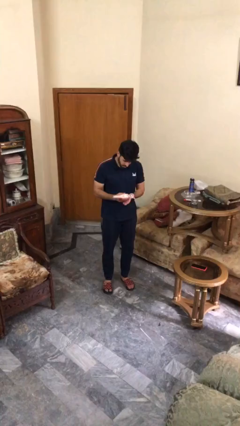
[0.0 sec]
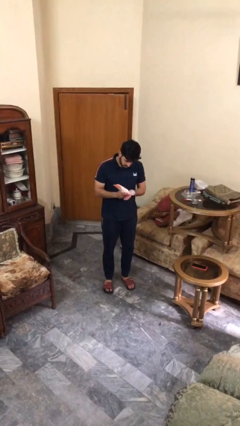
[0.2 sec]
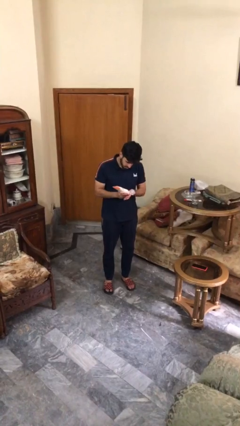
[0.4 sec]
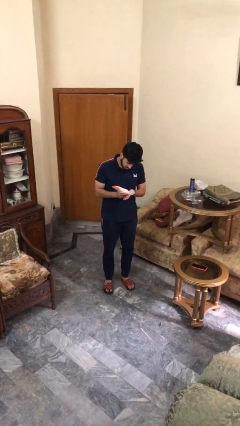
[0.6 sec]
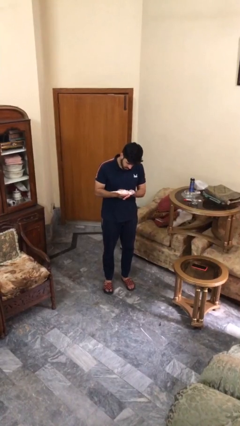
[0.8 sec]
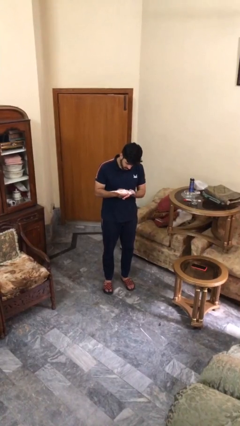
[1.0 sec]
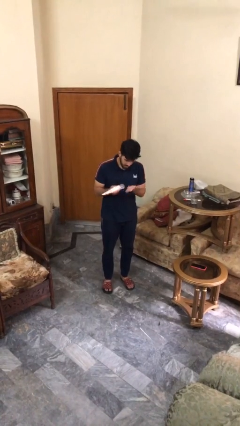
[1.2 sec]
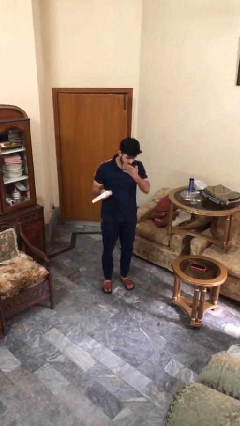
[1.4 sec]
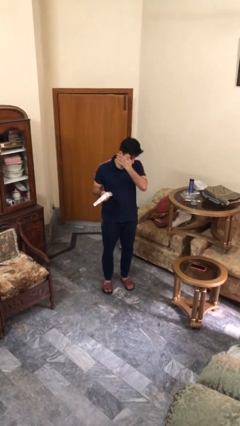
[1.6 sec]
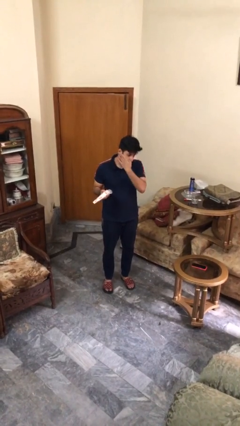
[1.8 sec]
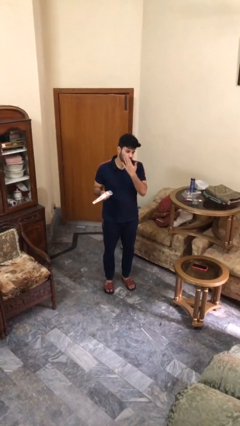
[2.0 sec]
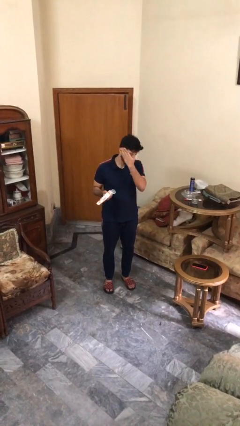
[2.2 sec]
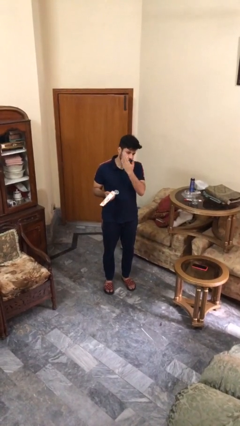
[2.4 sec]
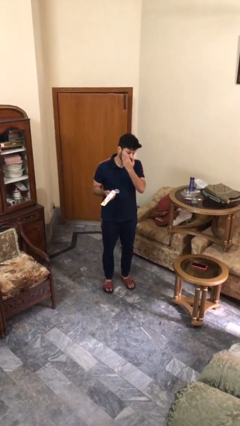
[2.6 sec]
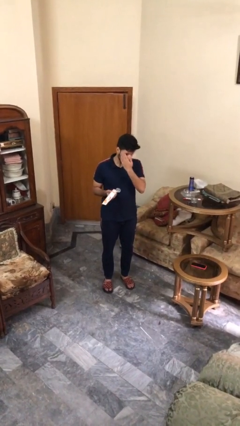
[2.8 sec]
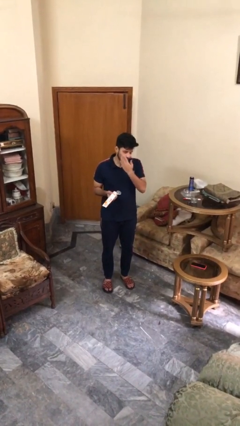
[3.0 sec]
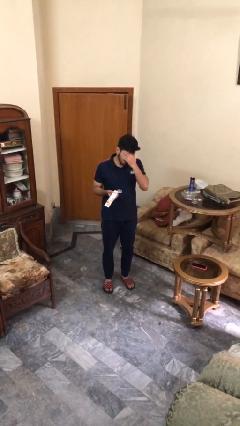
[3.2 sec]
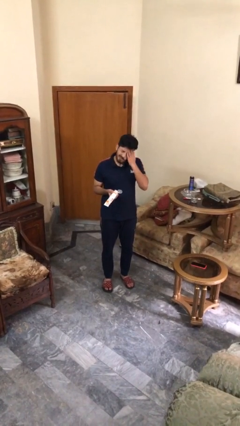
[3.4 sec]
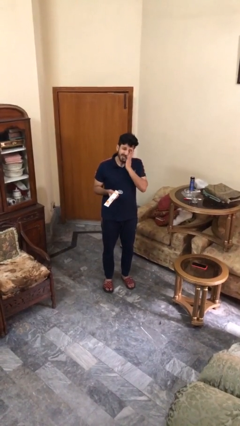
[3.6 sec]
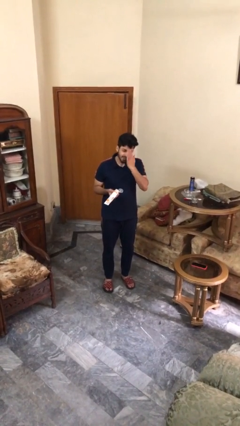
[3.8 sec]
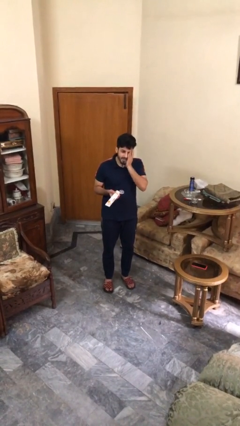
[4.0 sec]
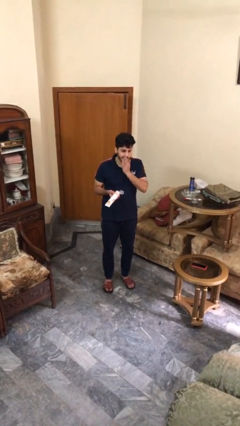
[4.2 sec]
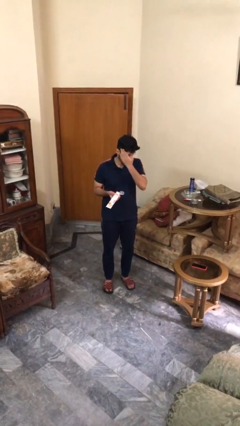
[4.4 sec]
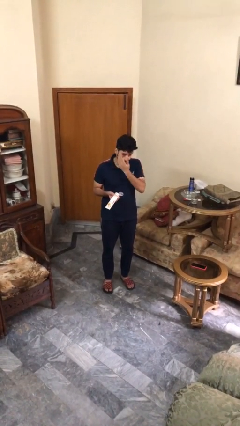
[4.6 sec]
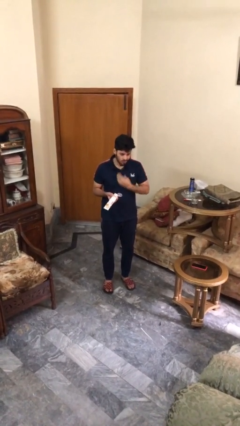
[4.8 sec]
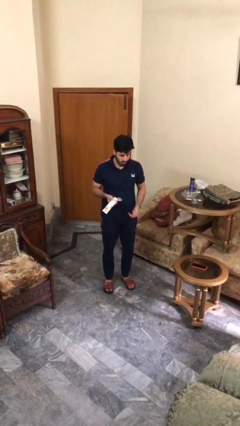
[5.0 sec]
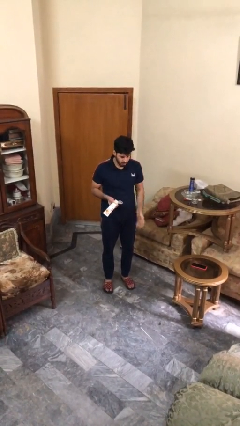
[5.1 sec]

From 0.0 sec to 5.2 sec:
person applies sunscreen

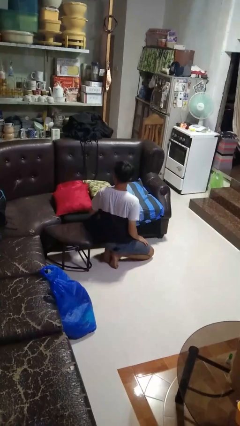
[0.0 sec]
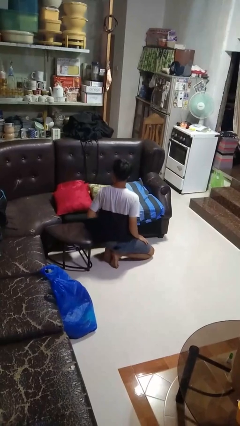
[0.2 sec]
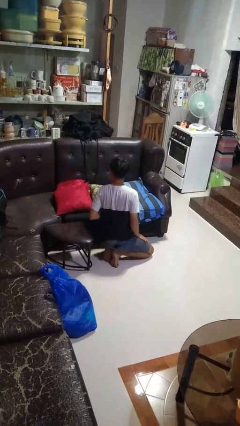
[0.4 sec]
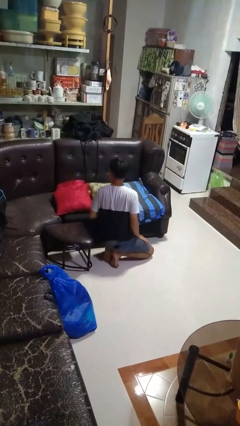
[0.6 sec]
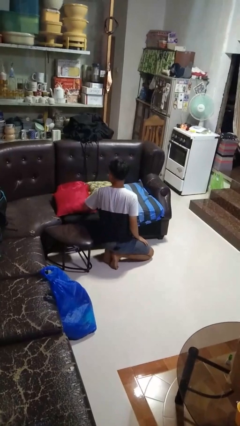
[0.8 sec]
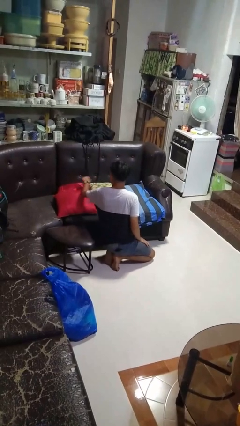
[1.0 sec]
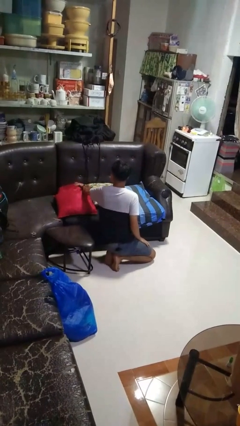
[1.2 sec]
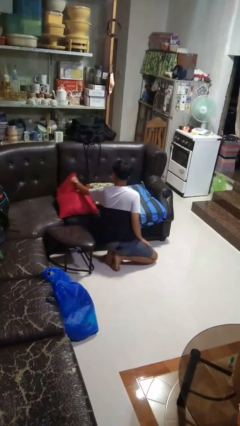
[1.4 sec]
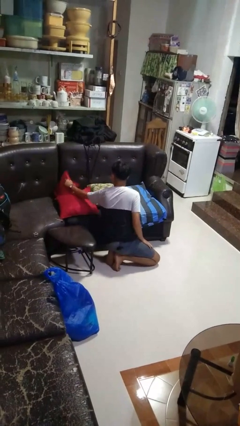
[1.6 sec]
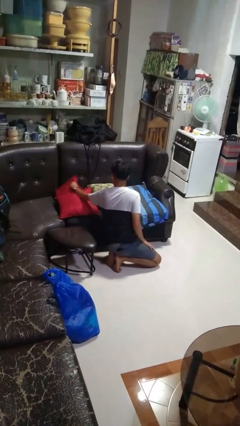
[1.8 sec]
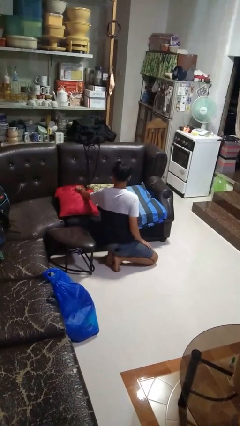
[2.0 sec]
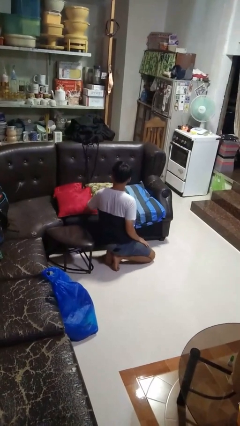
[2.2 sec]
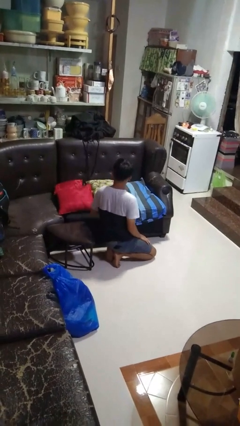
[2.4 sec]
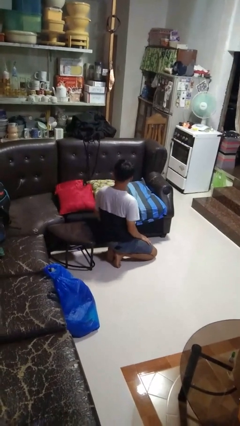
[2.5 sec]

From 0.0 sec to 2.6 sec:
person searches in couch

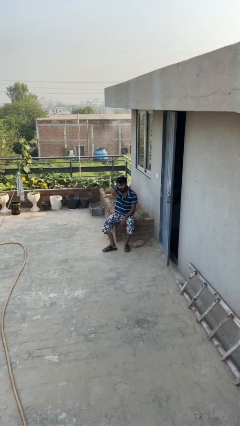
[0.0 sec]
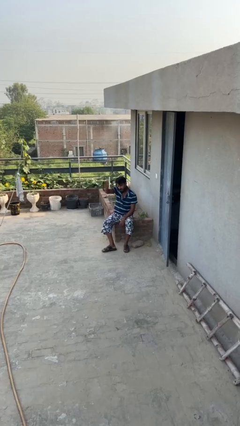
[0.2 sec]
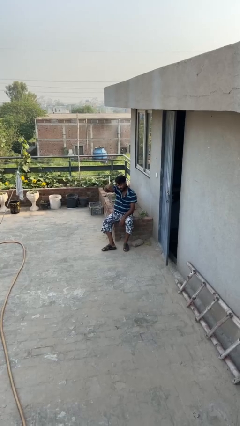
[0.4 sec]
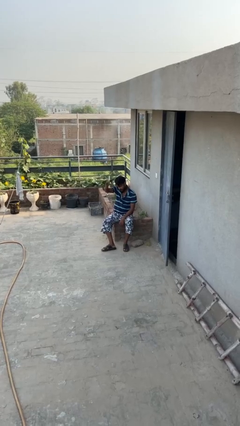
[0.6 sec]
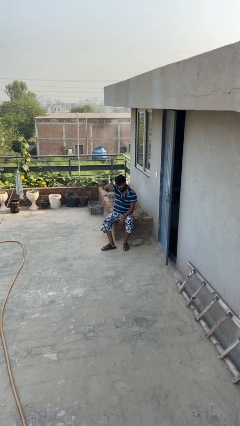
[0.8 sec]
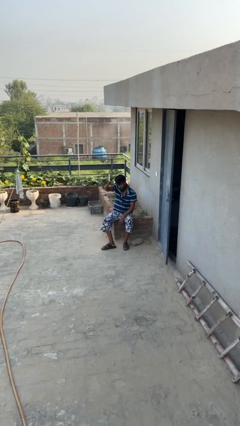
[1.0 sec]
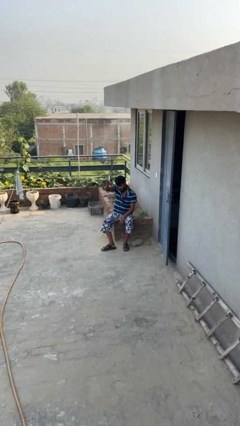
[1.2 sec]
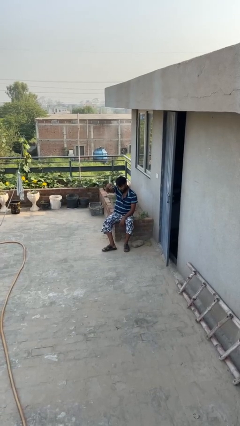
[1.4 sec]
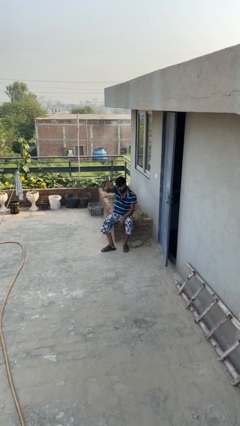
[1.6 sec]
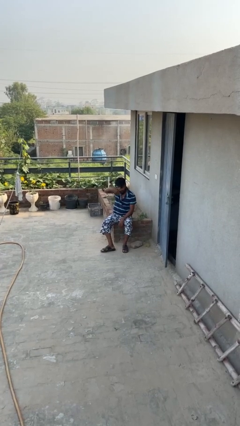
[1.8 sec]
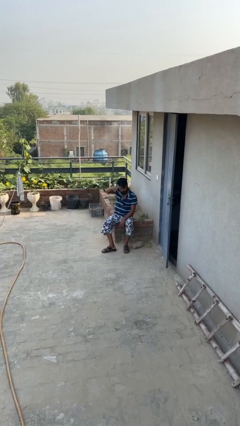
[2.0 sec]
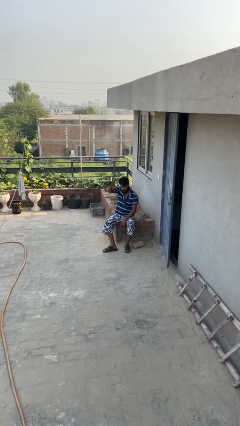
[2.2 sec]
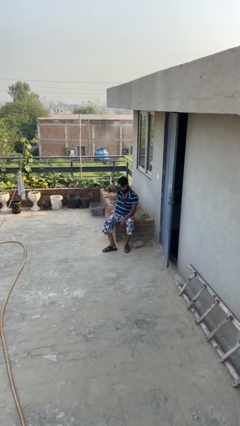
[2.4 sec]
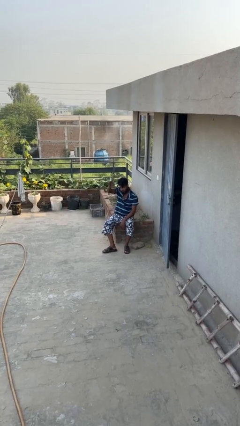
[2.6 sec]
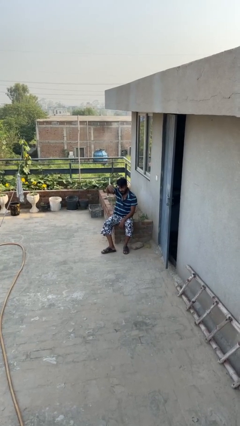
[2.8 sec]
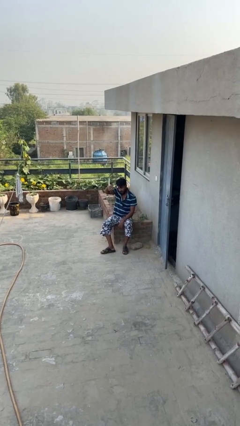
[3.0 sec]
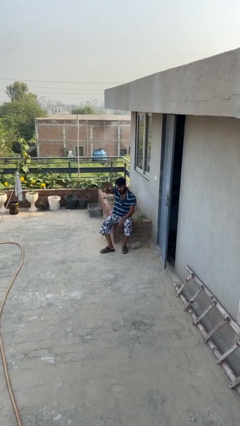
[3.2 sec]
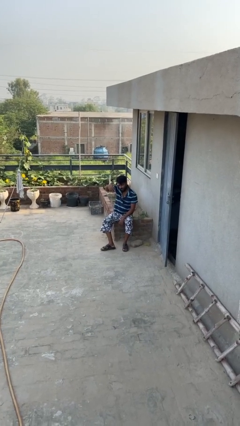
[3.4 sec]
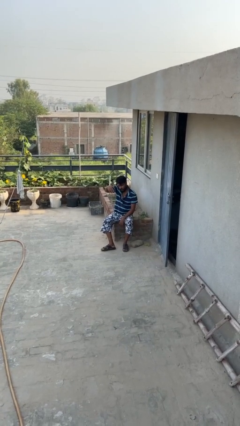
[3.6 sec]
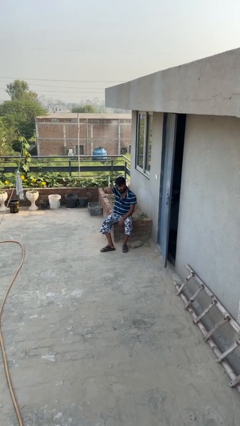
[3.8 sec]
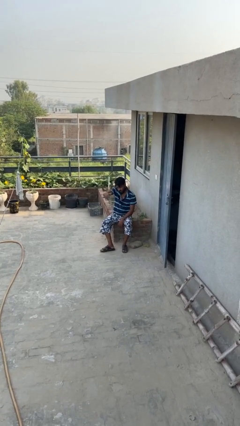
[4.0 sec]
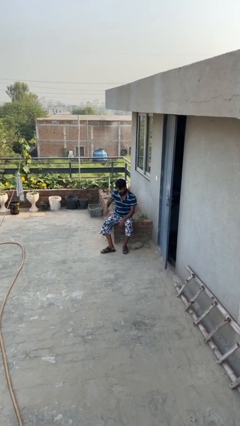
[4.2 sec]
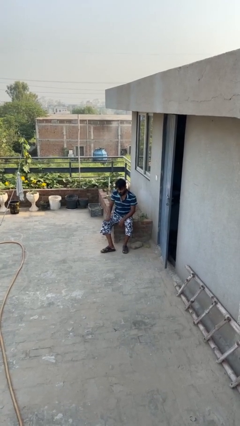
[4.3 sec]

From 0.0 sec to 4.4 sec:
person gestures come here

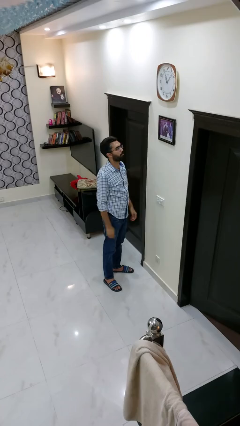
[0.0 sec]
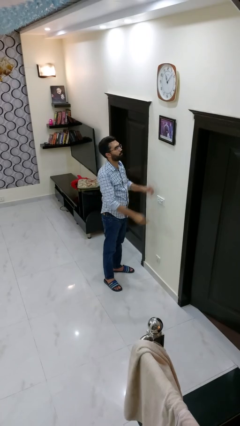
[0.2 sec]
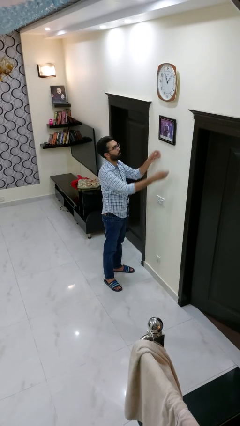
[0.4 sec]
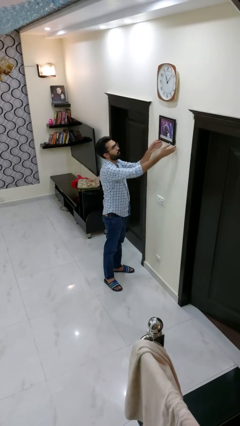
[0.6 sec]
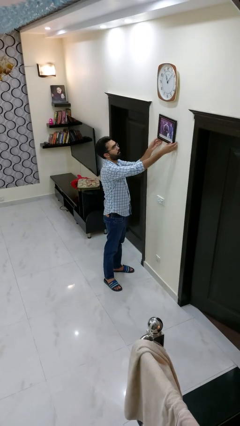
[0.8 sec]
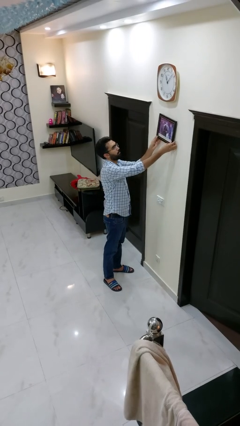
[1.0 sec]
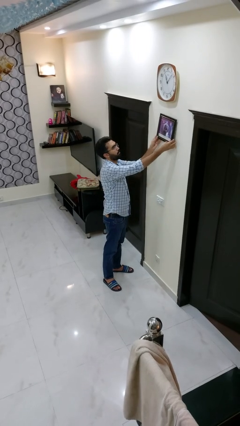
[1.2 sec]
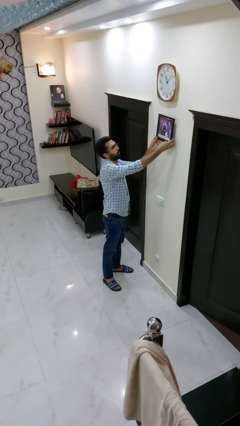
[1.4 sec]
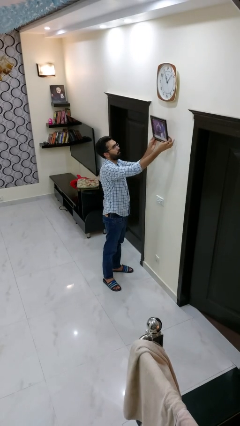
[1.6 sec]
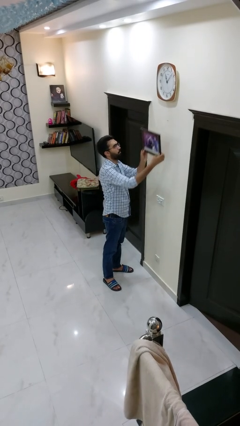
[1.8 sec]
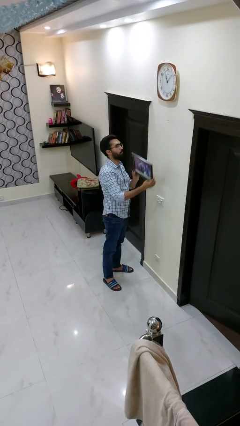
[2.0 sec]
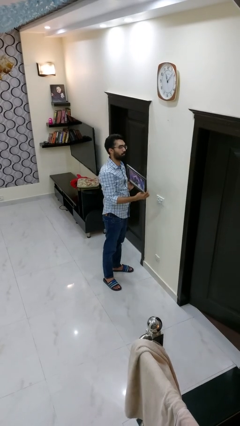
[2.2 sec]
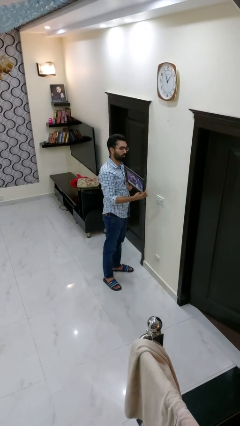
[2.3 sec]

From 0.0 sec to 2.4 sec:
person takes down picture frame

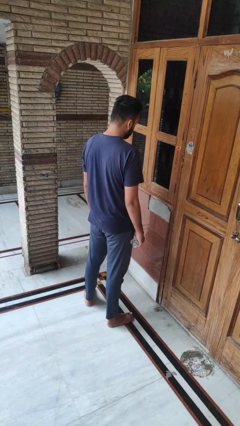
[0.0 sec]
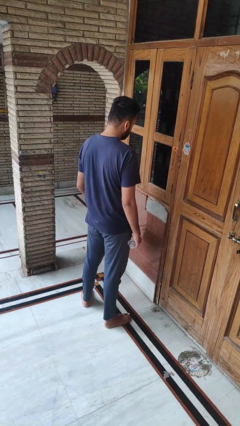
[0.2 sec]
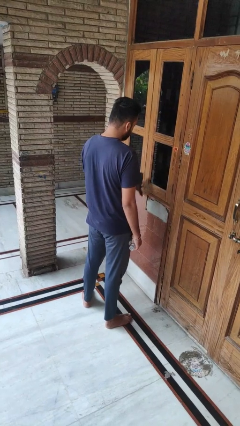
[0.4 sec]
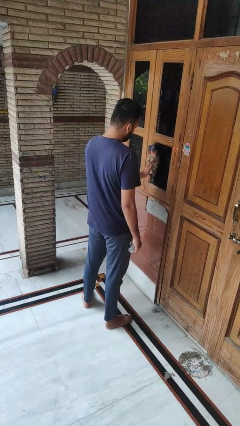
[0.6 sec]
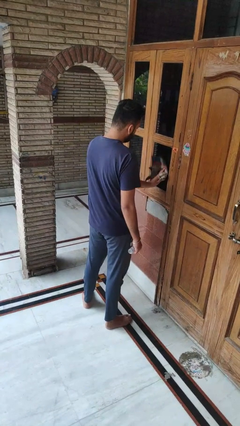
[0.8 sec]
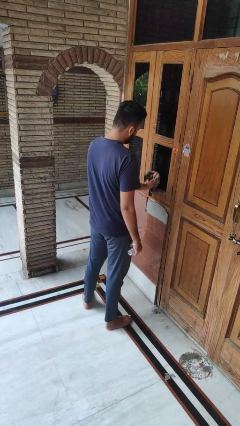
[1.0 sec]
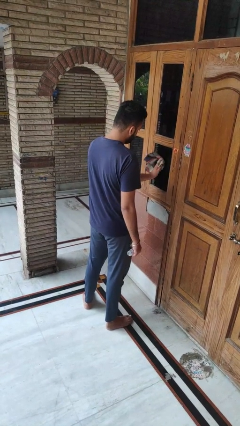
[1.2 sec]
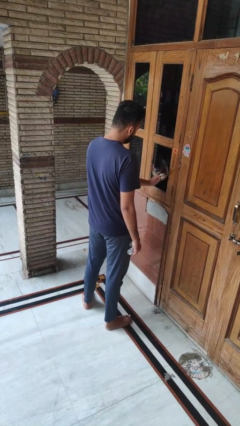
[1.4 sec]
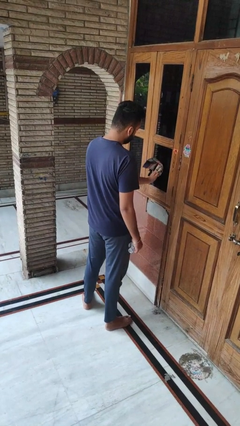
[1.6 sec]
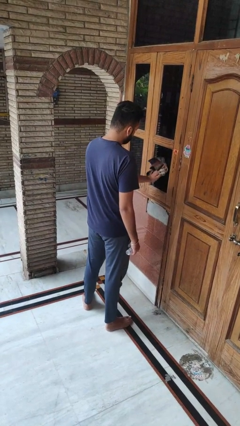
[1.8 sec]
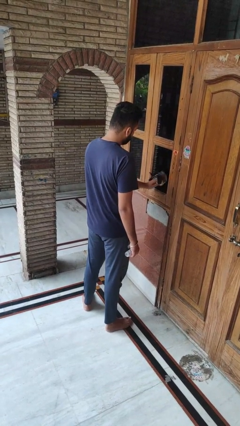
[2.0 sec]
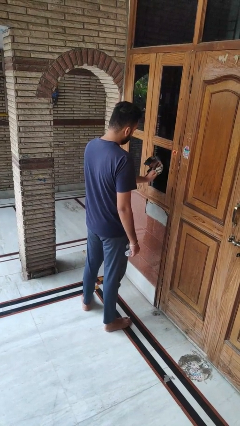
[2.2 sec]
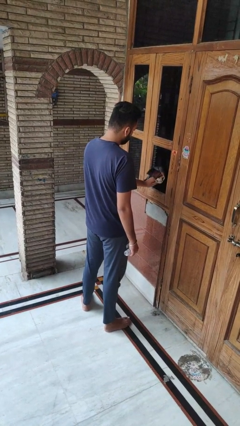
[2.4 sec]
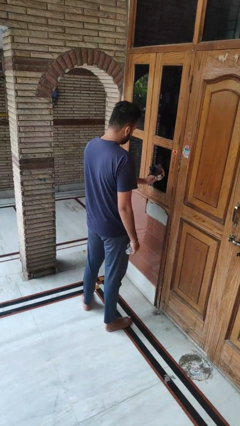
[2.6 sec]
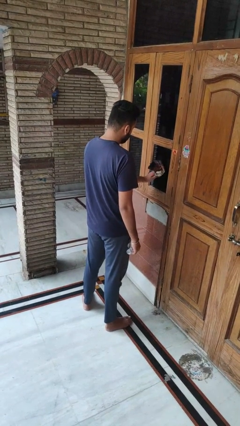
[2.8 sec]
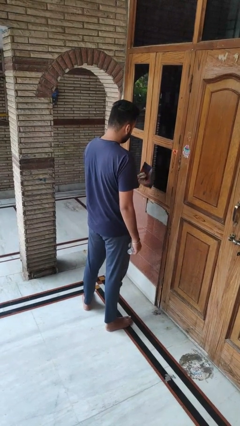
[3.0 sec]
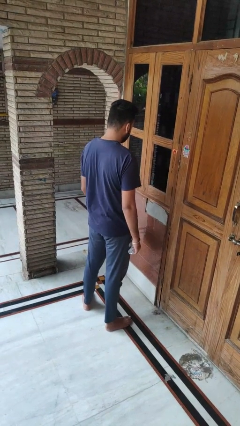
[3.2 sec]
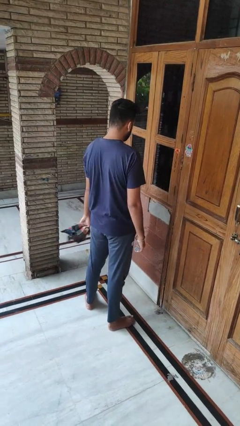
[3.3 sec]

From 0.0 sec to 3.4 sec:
person washes window
